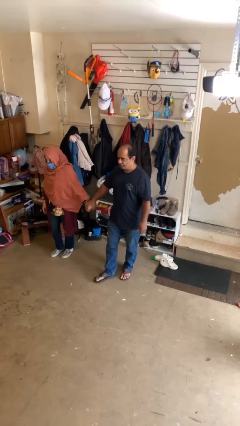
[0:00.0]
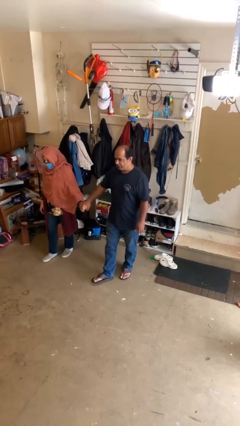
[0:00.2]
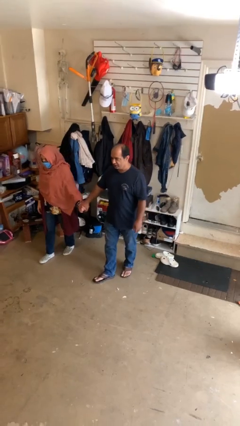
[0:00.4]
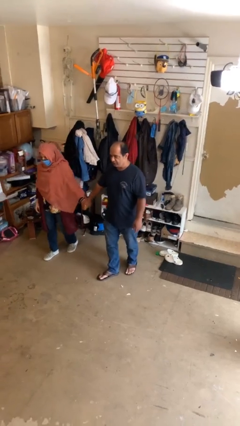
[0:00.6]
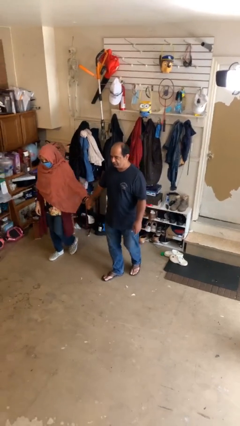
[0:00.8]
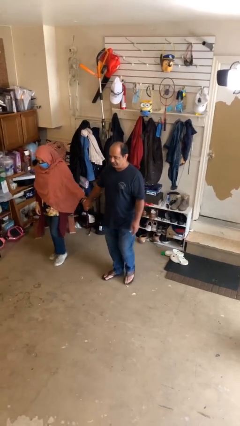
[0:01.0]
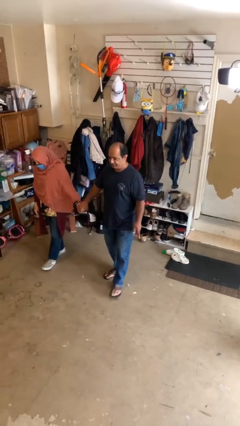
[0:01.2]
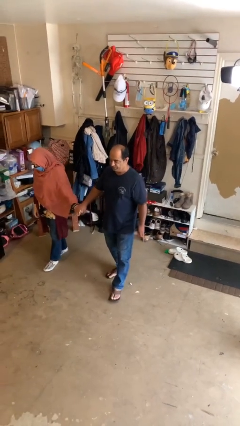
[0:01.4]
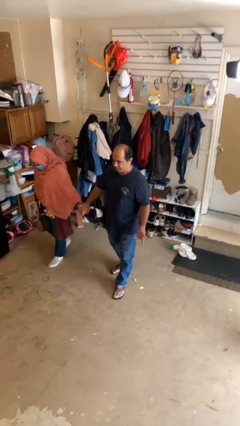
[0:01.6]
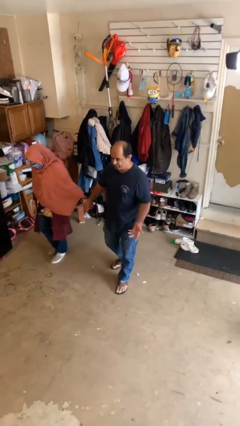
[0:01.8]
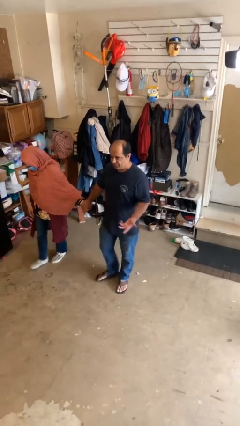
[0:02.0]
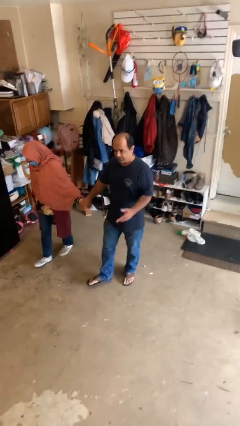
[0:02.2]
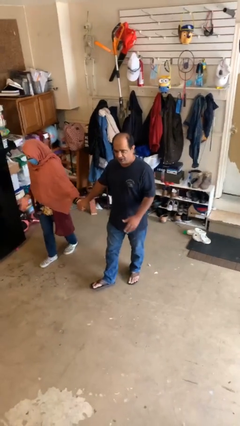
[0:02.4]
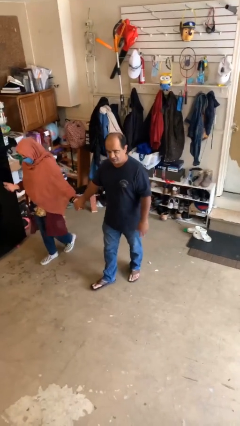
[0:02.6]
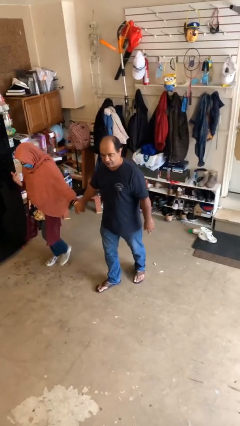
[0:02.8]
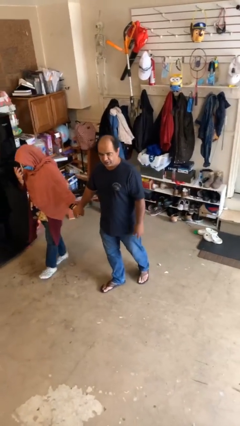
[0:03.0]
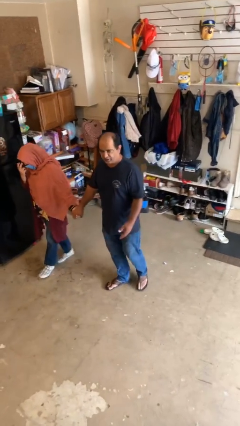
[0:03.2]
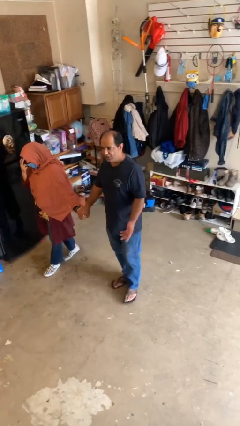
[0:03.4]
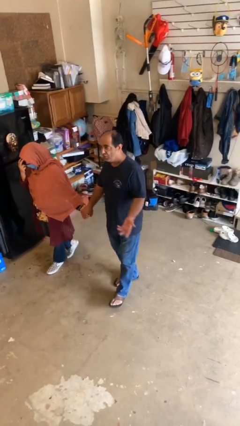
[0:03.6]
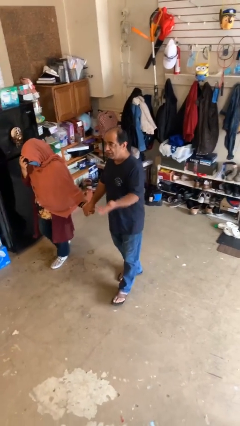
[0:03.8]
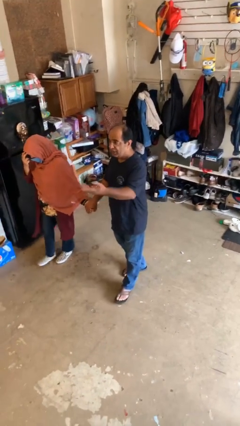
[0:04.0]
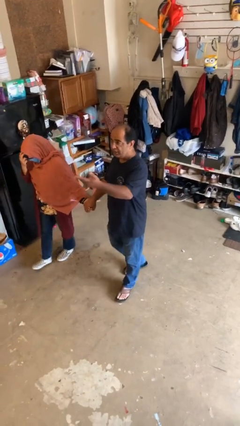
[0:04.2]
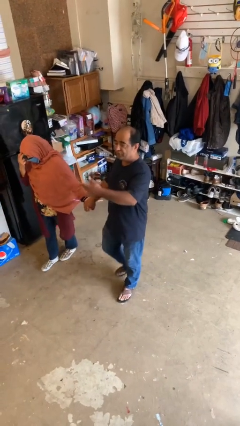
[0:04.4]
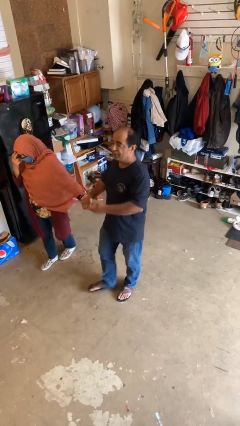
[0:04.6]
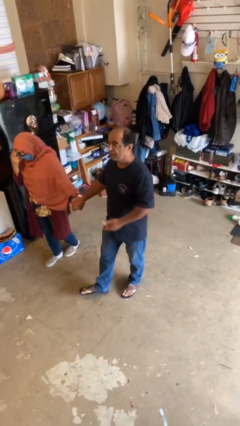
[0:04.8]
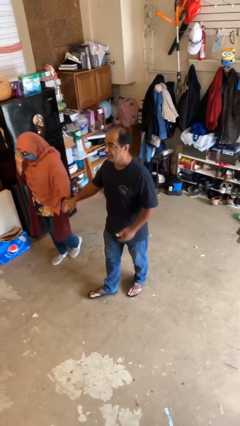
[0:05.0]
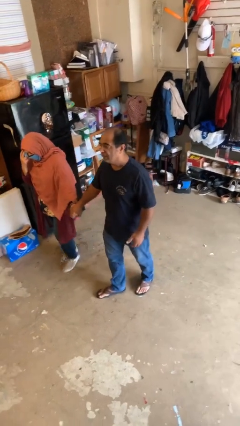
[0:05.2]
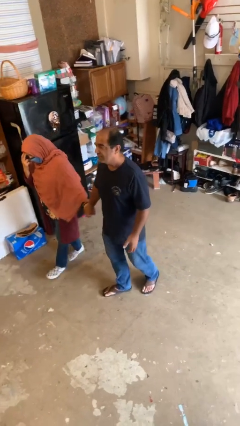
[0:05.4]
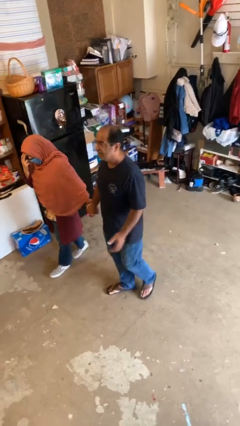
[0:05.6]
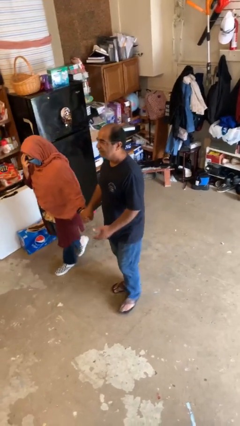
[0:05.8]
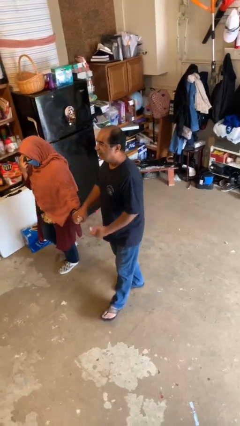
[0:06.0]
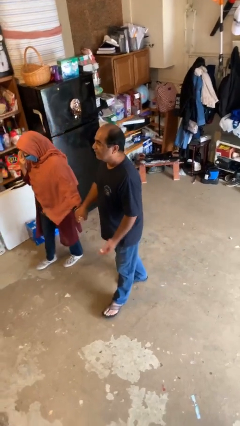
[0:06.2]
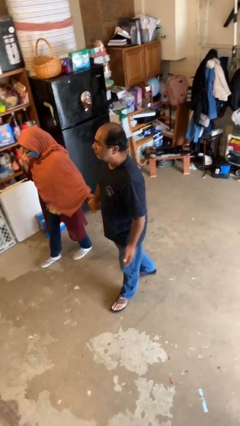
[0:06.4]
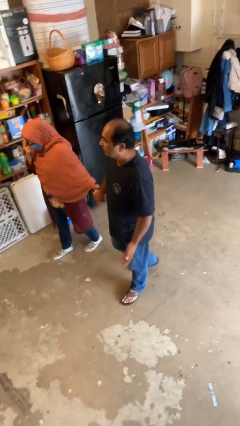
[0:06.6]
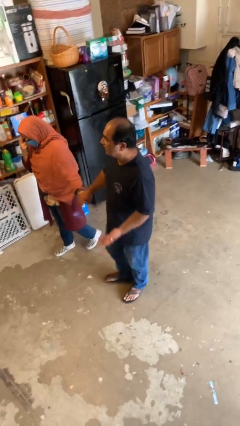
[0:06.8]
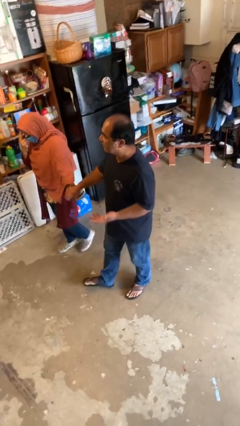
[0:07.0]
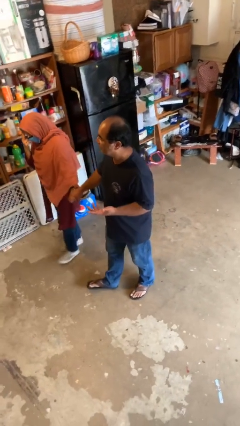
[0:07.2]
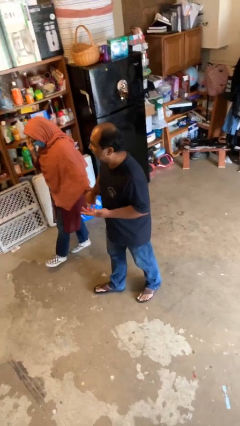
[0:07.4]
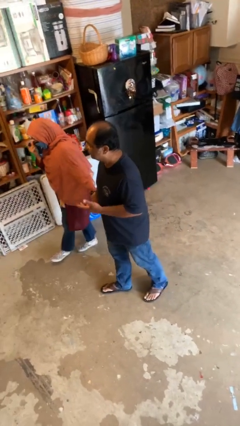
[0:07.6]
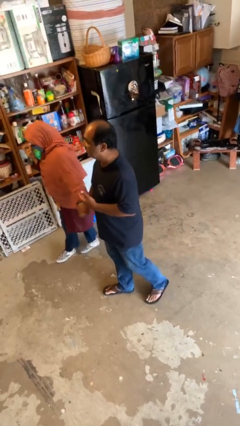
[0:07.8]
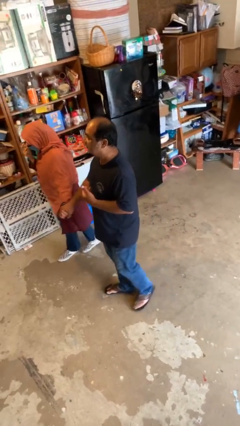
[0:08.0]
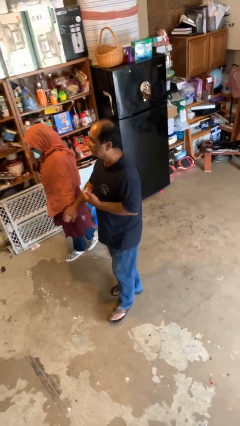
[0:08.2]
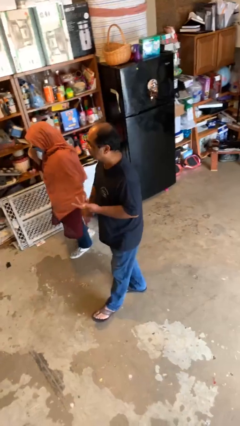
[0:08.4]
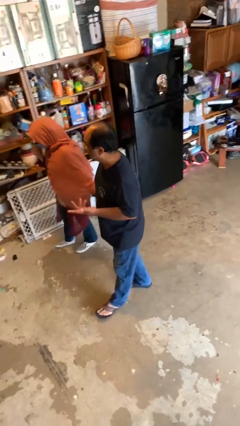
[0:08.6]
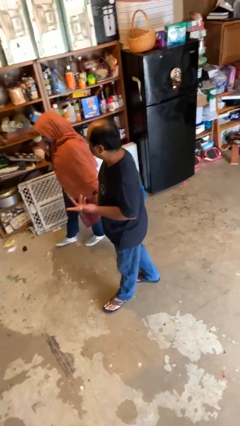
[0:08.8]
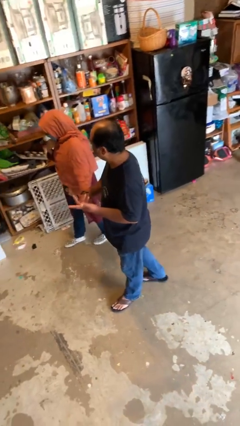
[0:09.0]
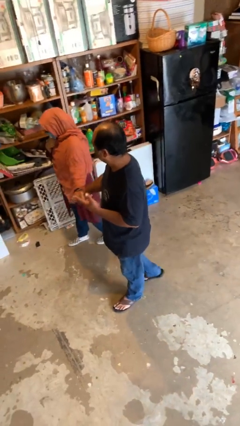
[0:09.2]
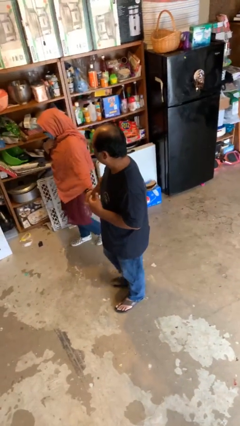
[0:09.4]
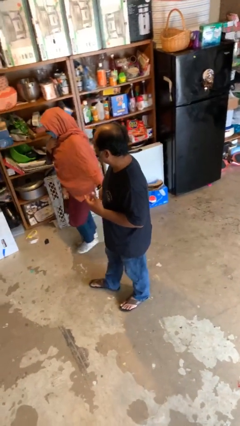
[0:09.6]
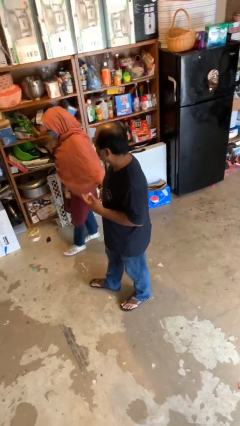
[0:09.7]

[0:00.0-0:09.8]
person holds hand

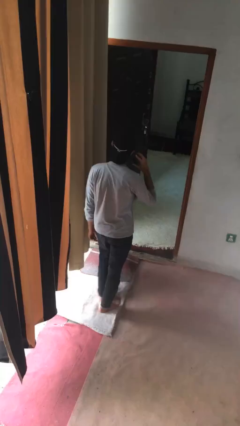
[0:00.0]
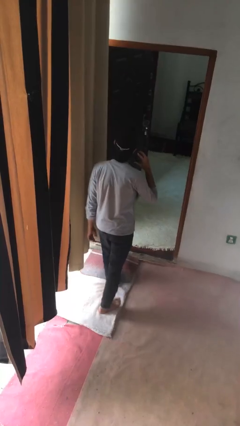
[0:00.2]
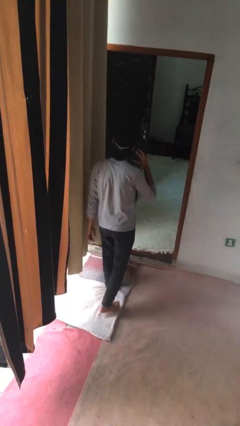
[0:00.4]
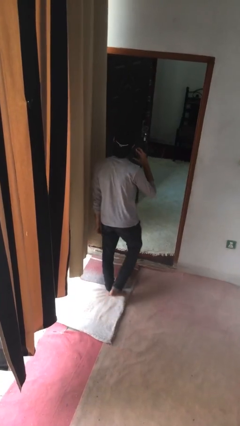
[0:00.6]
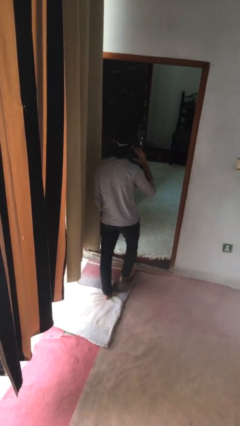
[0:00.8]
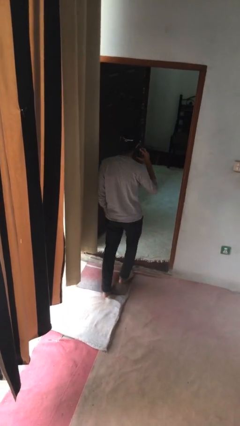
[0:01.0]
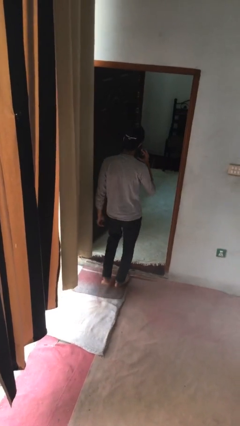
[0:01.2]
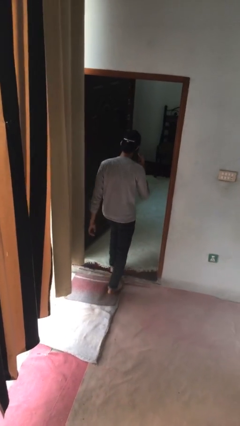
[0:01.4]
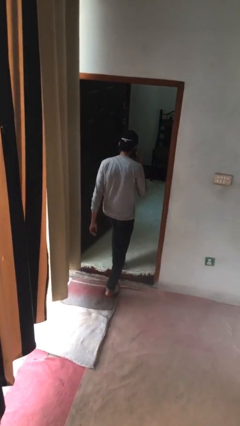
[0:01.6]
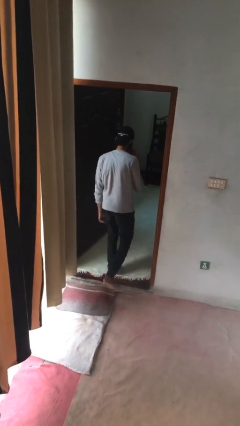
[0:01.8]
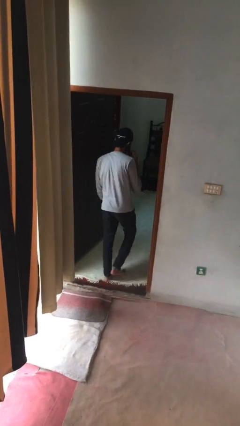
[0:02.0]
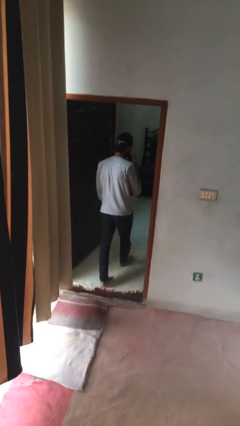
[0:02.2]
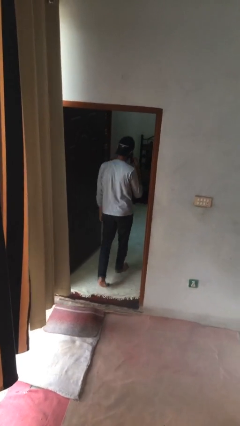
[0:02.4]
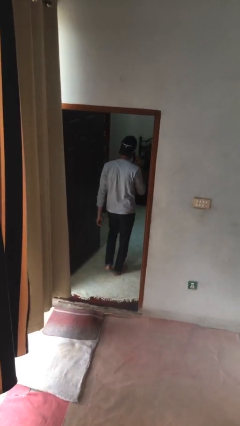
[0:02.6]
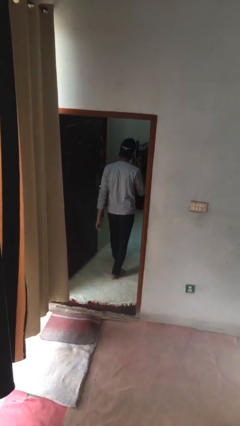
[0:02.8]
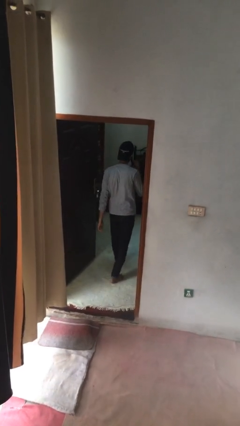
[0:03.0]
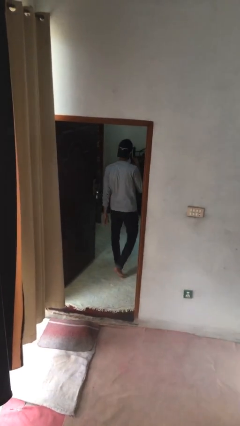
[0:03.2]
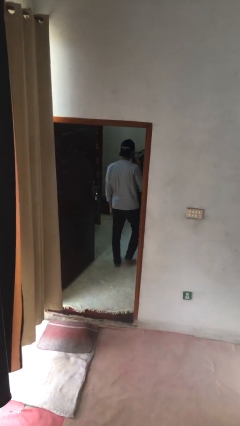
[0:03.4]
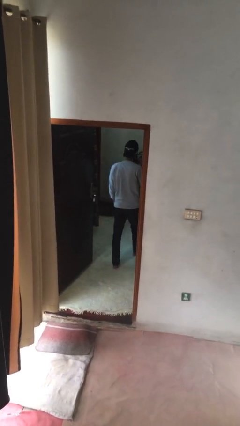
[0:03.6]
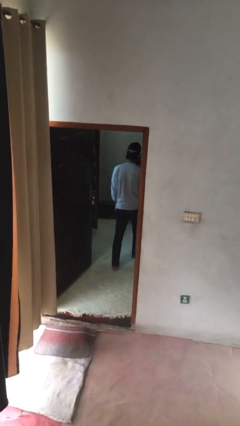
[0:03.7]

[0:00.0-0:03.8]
person exits scene through structure

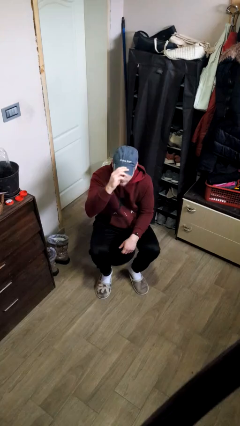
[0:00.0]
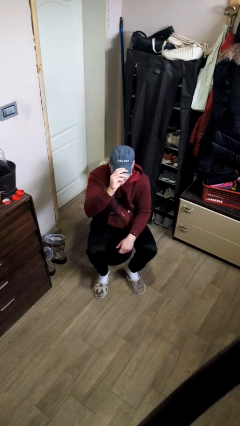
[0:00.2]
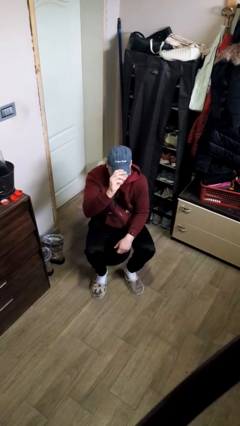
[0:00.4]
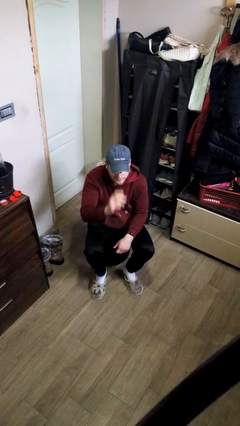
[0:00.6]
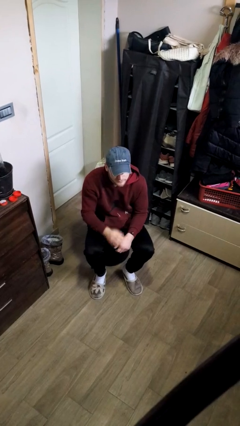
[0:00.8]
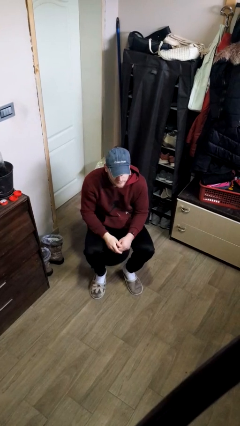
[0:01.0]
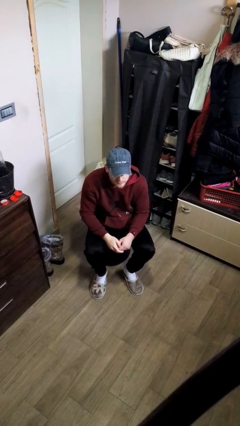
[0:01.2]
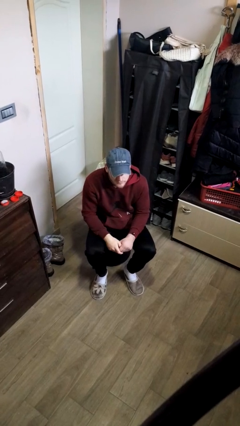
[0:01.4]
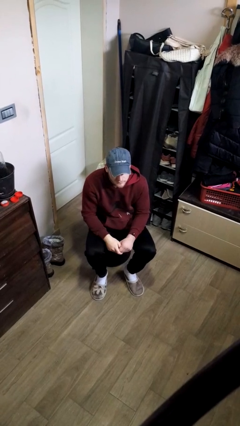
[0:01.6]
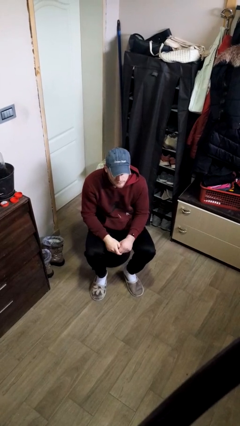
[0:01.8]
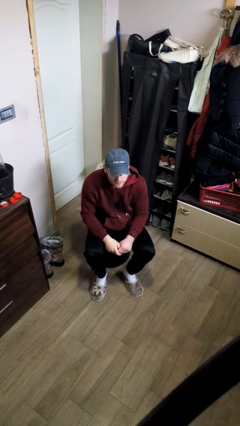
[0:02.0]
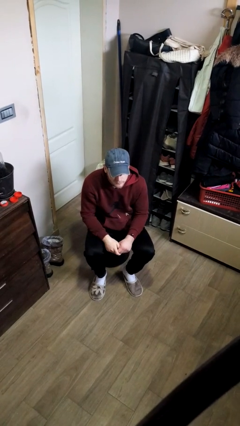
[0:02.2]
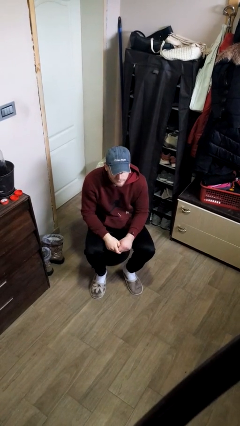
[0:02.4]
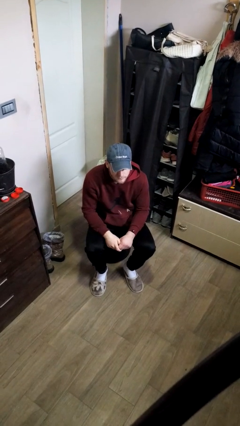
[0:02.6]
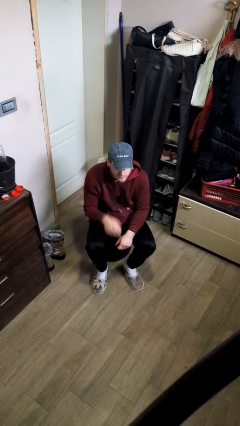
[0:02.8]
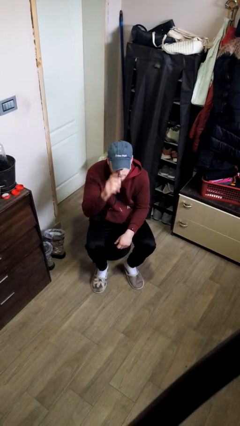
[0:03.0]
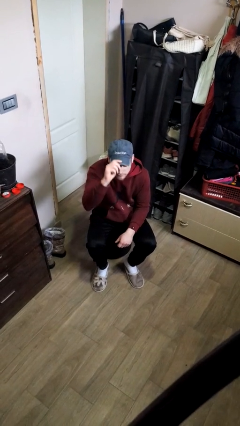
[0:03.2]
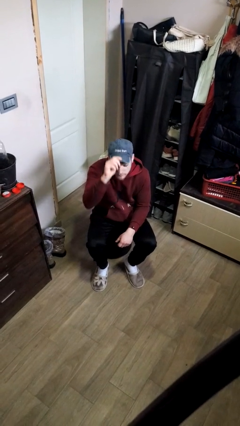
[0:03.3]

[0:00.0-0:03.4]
person puts on hat

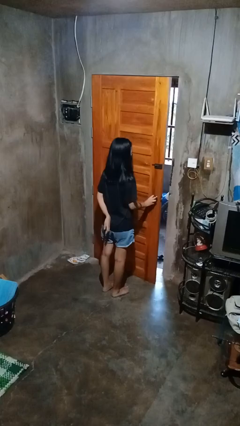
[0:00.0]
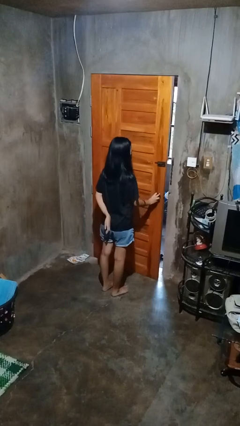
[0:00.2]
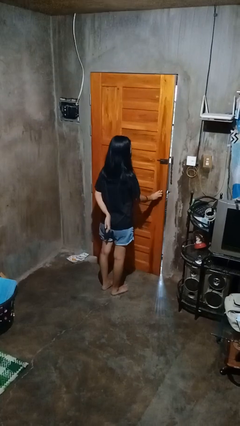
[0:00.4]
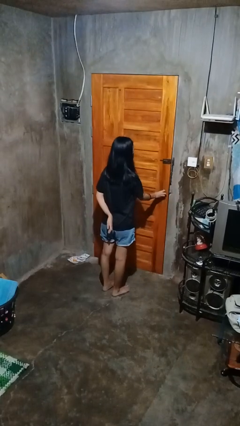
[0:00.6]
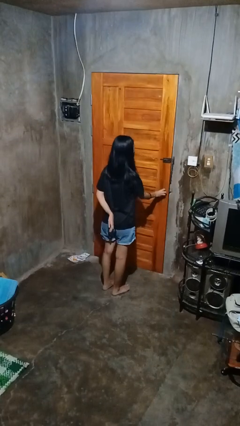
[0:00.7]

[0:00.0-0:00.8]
person closes facility door

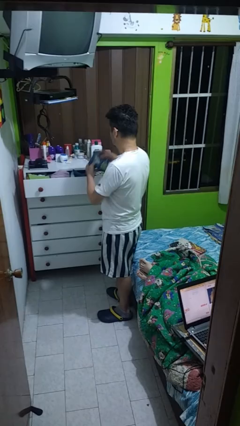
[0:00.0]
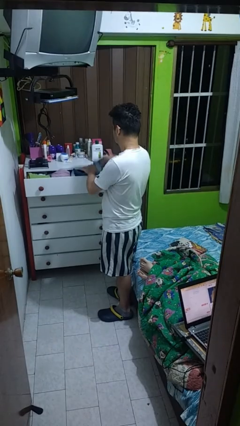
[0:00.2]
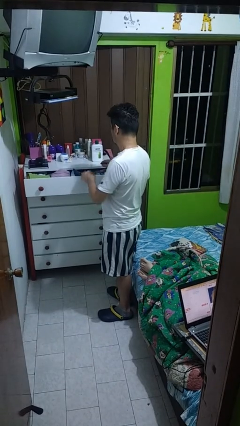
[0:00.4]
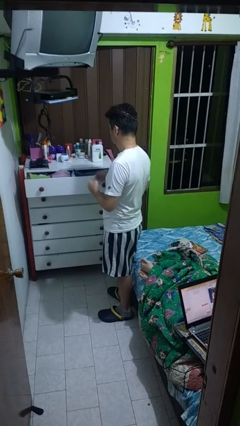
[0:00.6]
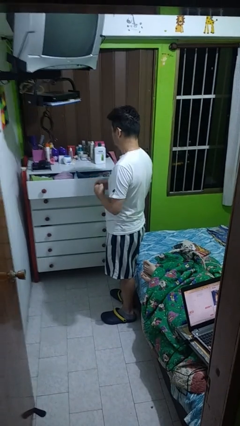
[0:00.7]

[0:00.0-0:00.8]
person puts clothes into dresser
